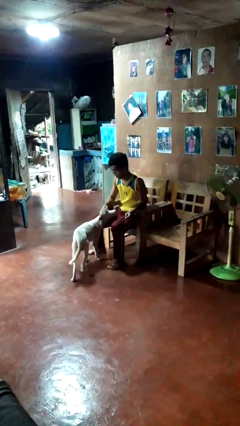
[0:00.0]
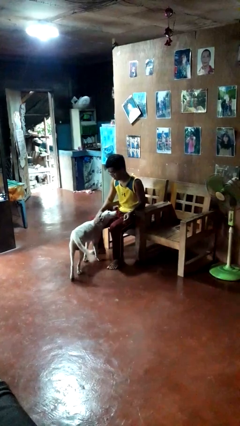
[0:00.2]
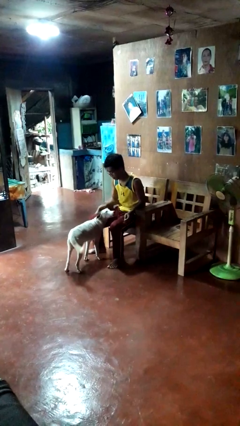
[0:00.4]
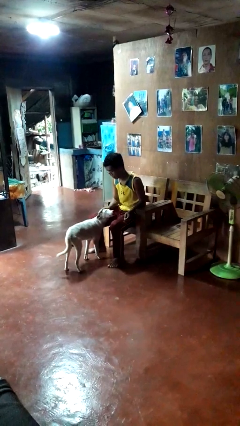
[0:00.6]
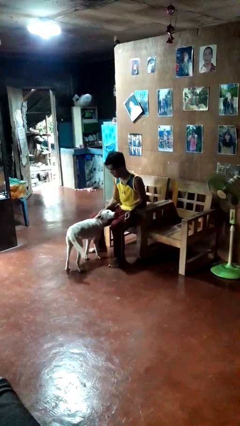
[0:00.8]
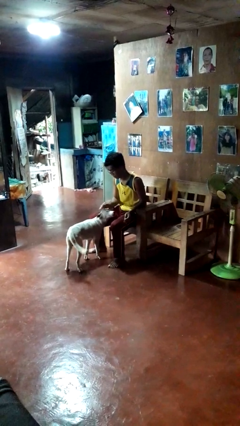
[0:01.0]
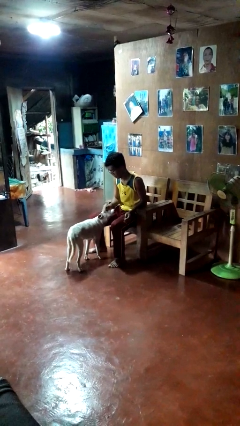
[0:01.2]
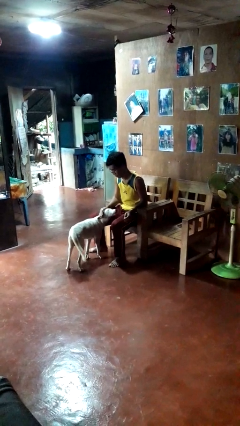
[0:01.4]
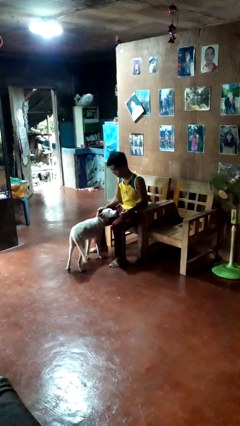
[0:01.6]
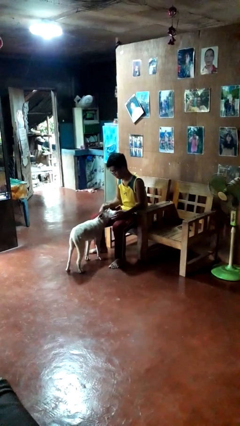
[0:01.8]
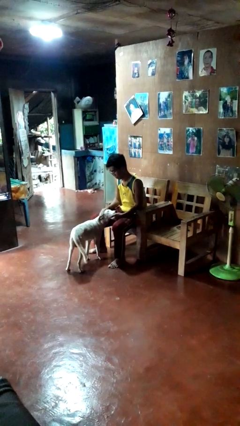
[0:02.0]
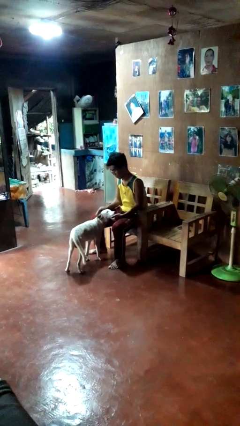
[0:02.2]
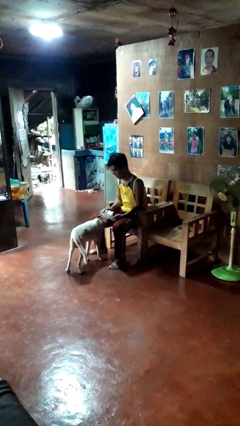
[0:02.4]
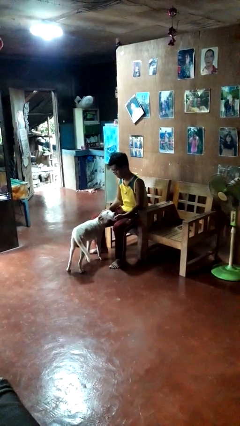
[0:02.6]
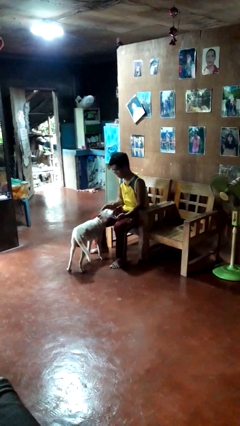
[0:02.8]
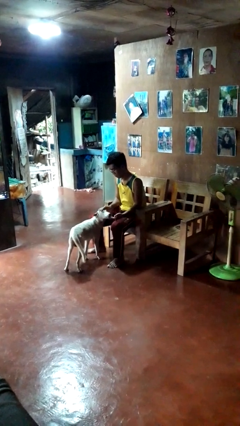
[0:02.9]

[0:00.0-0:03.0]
person pets dog

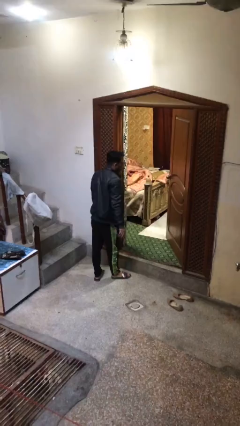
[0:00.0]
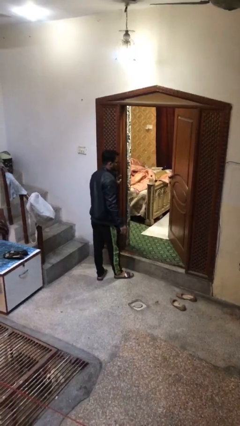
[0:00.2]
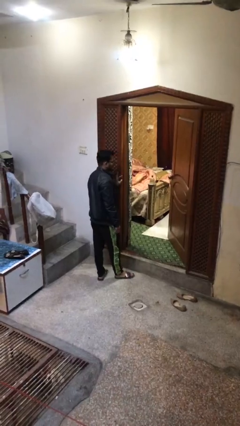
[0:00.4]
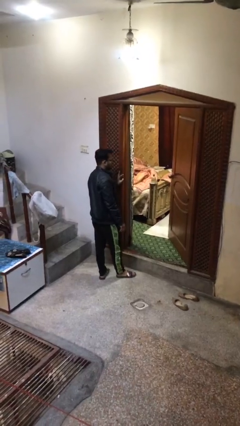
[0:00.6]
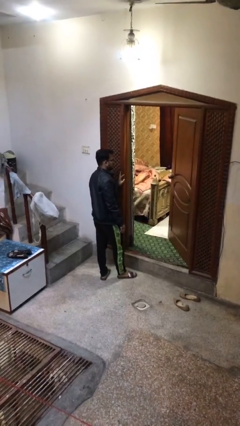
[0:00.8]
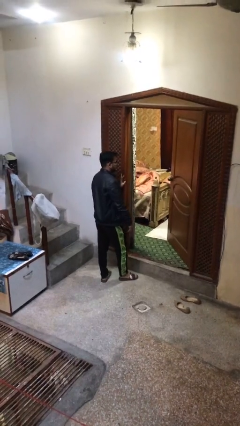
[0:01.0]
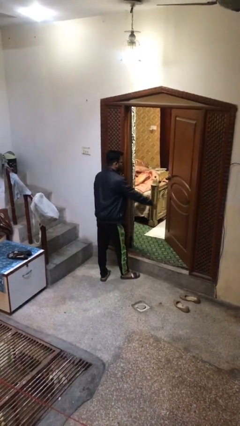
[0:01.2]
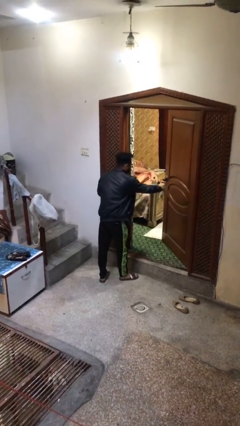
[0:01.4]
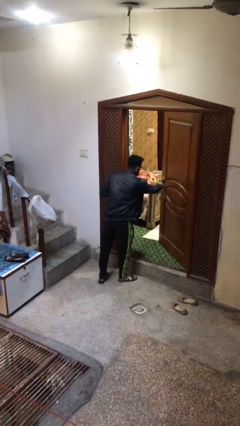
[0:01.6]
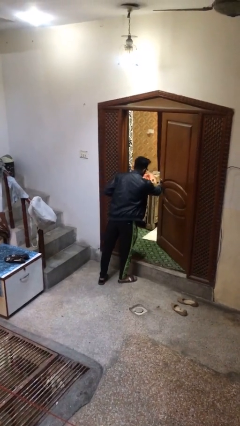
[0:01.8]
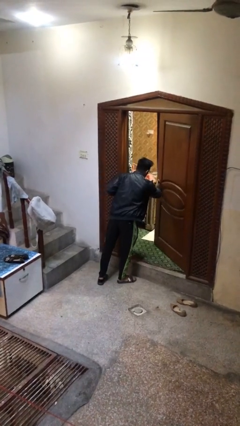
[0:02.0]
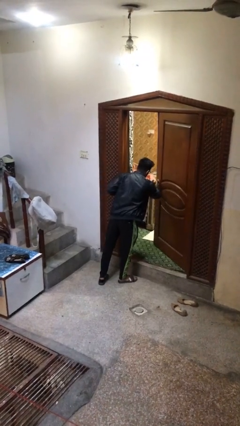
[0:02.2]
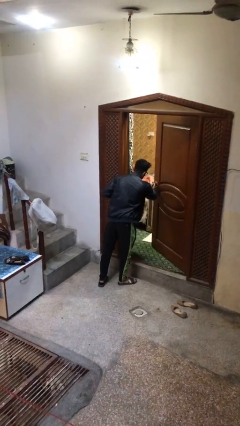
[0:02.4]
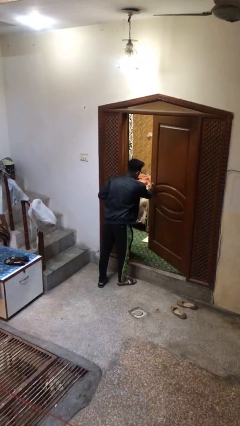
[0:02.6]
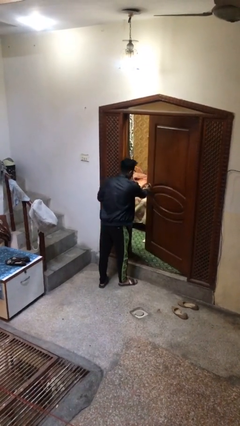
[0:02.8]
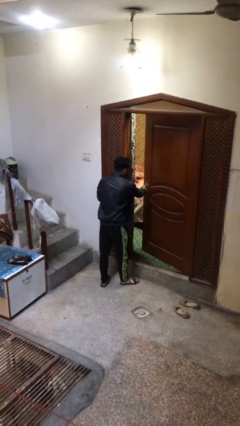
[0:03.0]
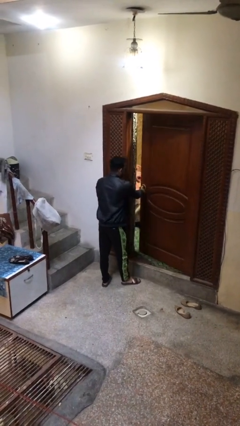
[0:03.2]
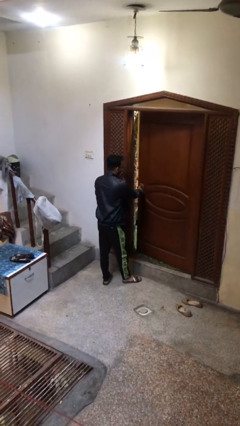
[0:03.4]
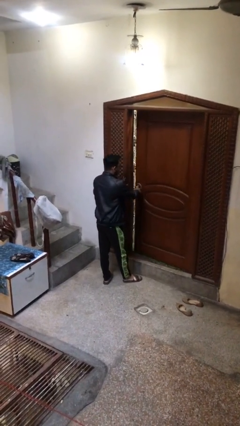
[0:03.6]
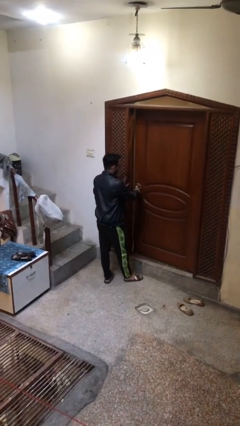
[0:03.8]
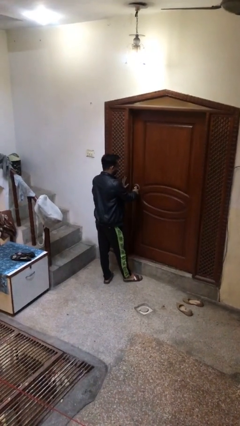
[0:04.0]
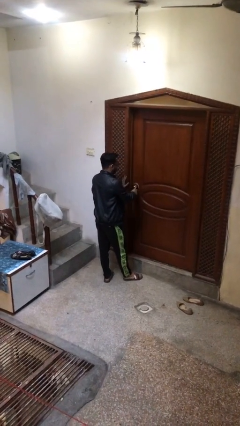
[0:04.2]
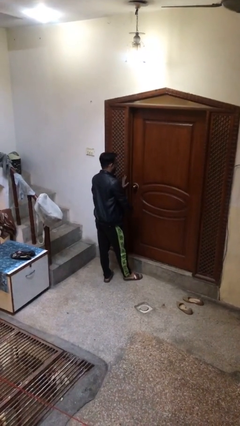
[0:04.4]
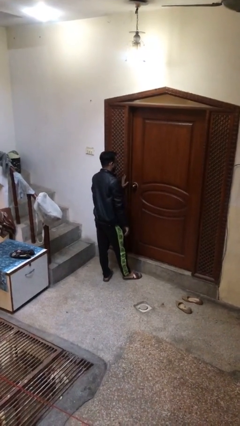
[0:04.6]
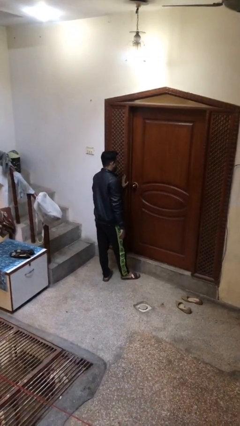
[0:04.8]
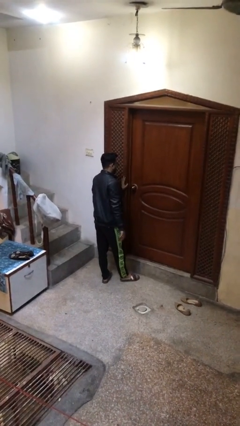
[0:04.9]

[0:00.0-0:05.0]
person closes facility door

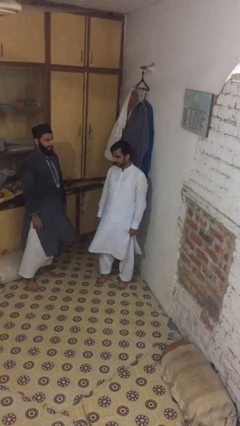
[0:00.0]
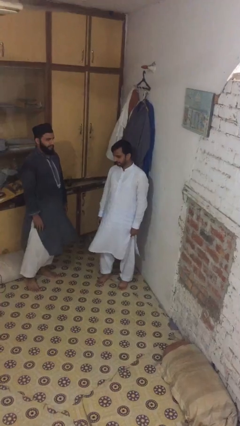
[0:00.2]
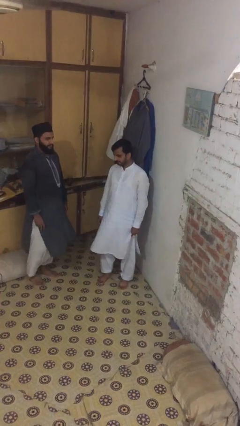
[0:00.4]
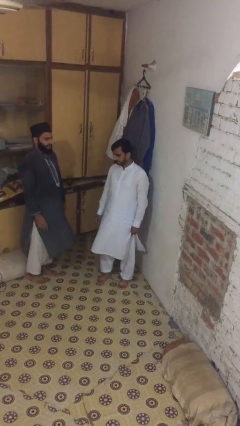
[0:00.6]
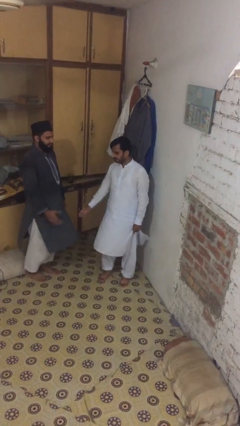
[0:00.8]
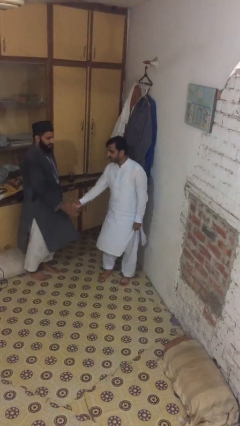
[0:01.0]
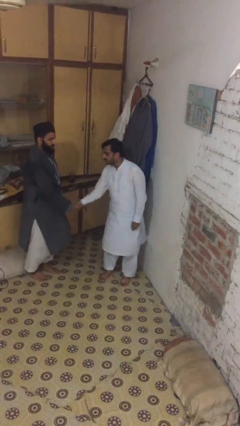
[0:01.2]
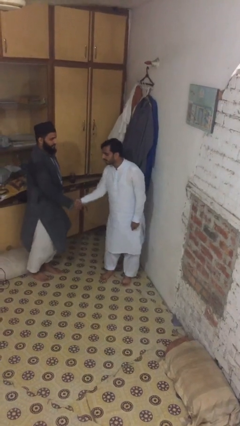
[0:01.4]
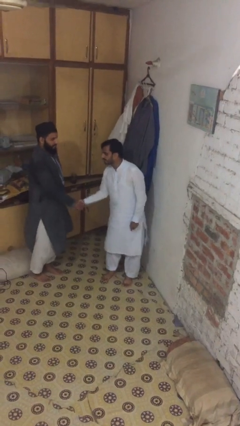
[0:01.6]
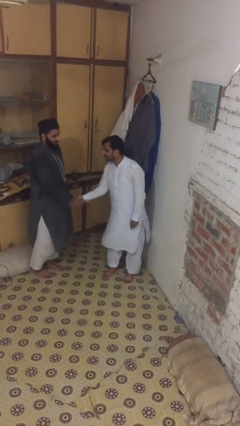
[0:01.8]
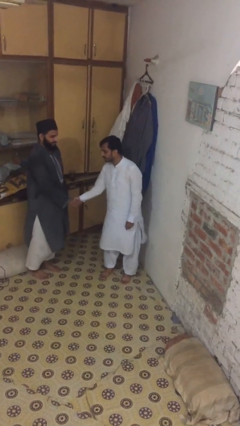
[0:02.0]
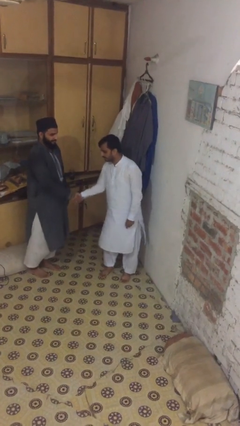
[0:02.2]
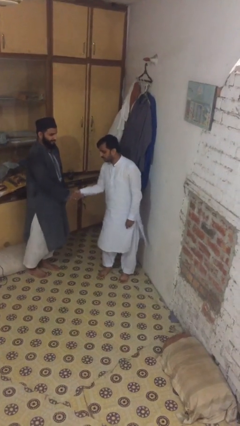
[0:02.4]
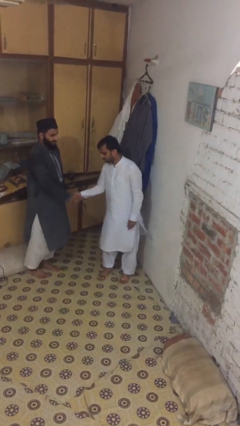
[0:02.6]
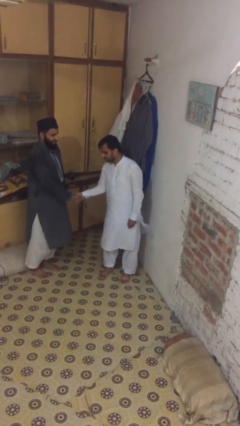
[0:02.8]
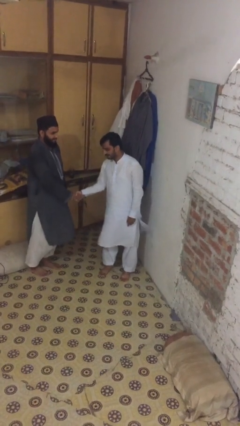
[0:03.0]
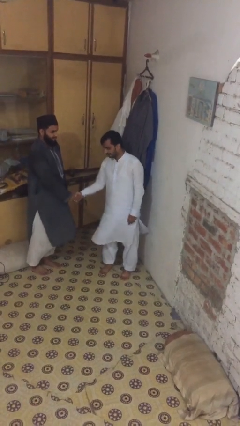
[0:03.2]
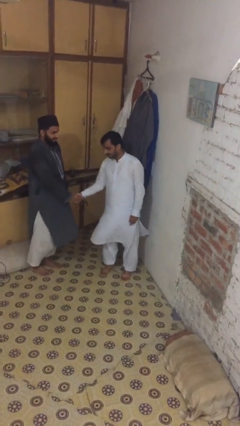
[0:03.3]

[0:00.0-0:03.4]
person shakes hand

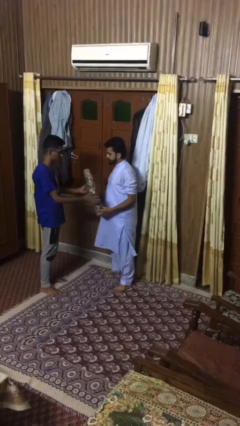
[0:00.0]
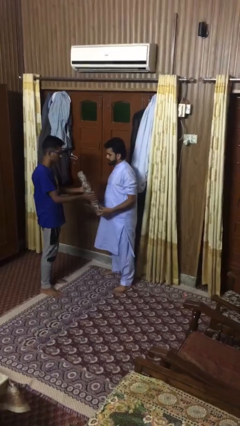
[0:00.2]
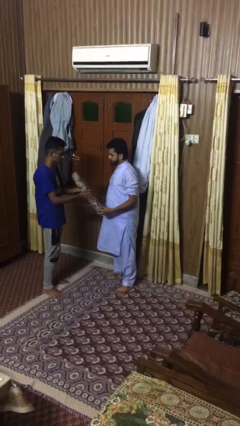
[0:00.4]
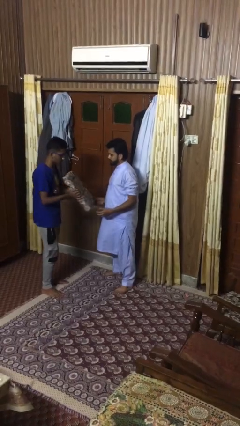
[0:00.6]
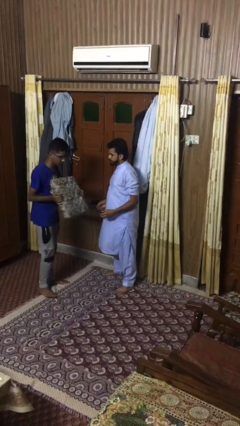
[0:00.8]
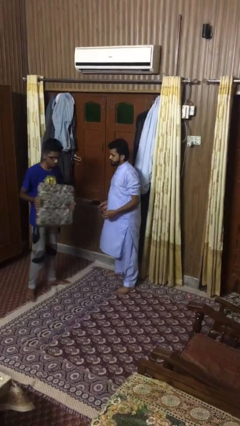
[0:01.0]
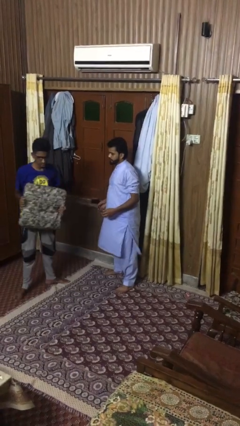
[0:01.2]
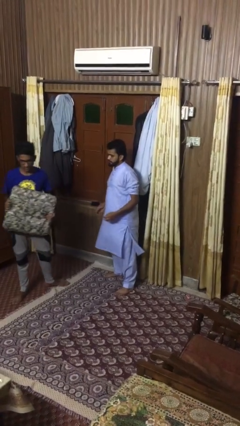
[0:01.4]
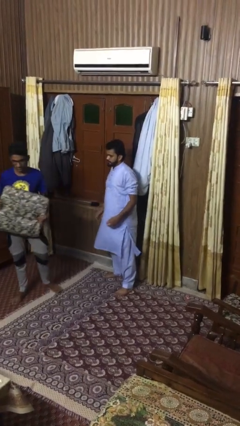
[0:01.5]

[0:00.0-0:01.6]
person transfers object to person

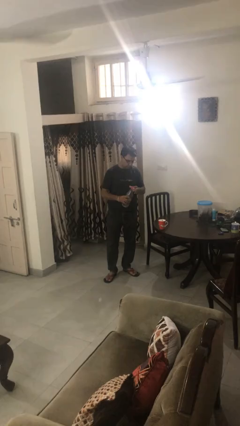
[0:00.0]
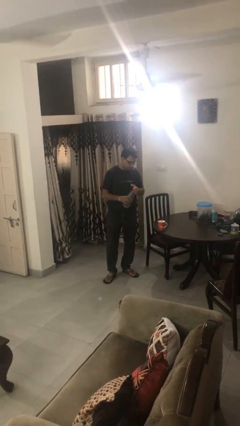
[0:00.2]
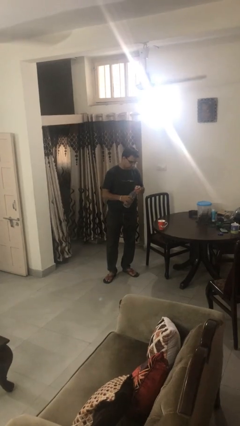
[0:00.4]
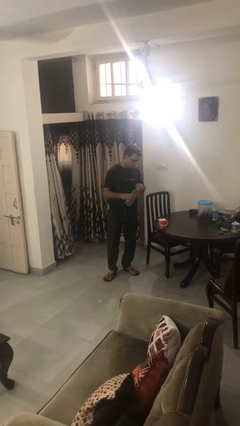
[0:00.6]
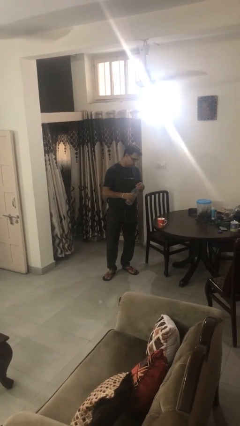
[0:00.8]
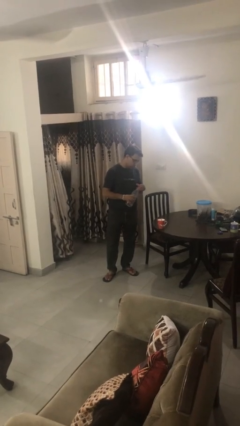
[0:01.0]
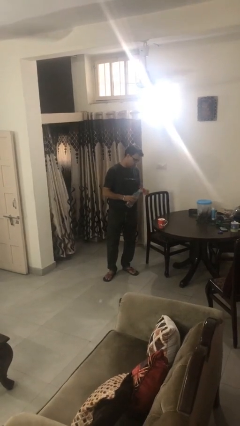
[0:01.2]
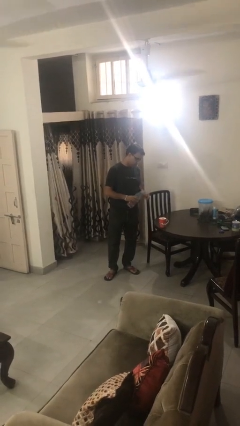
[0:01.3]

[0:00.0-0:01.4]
person unscrews lid from bottle

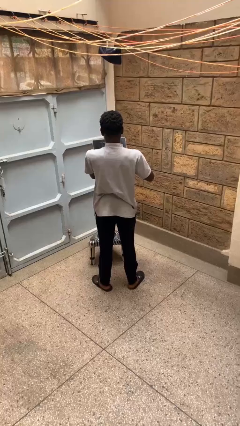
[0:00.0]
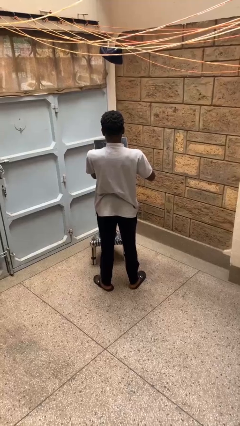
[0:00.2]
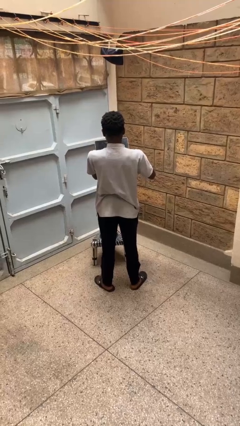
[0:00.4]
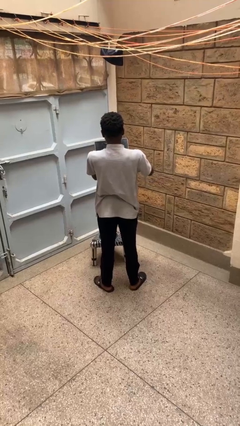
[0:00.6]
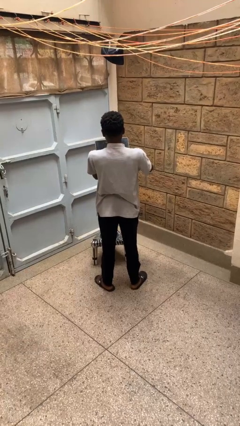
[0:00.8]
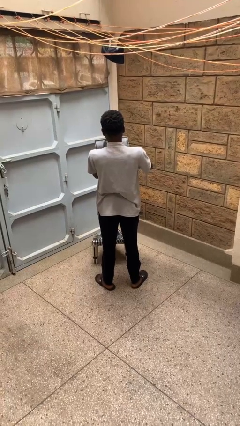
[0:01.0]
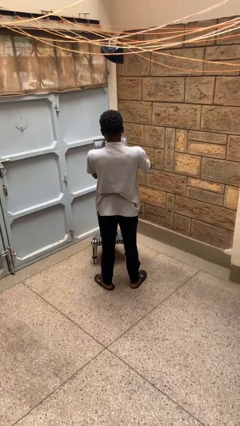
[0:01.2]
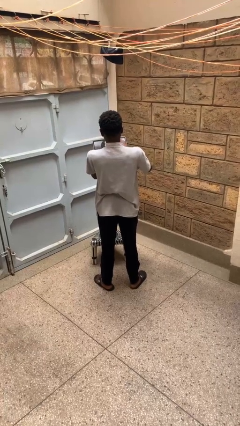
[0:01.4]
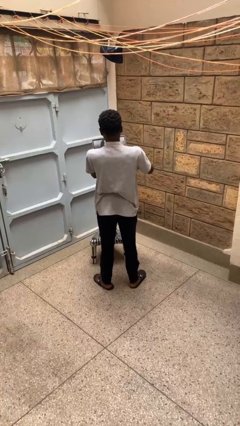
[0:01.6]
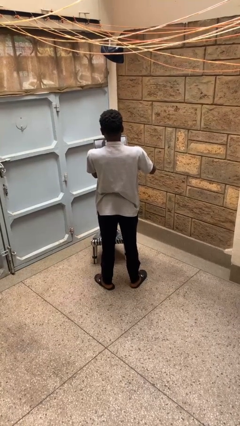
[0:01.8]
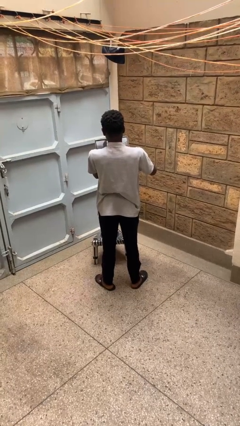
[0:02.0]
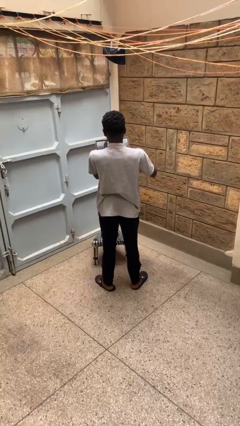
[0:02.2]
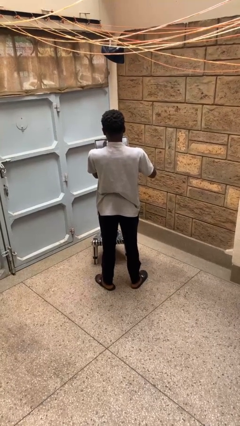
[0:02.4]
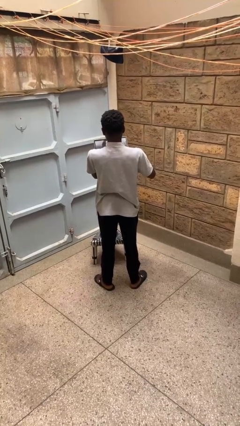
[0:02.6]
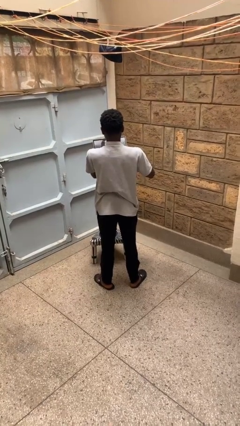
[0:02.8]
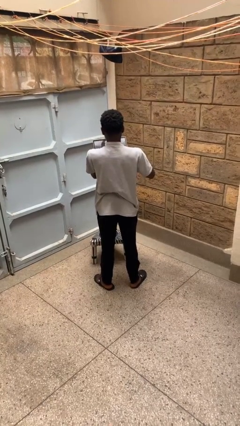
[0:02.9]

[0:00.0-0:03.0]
person interacts with tablet
